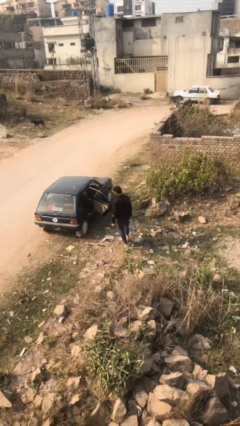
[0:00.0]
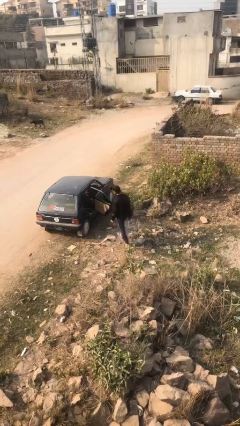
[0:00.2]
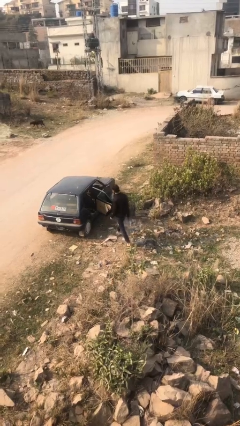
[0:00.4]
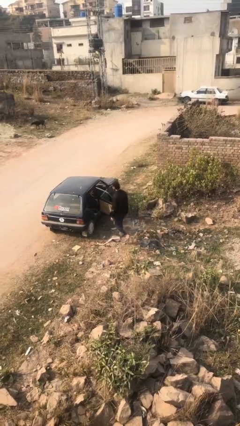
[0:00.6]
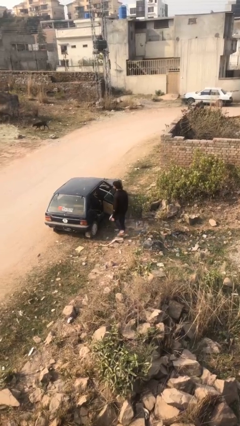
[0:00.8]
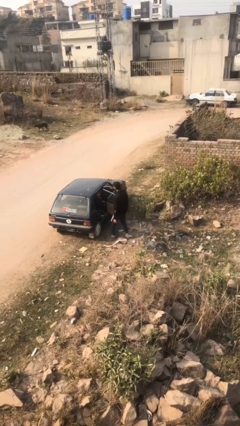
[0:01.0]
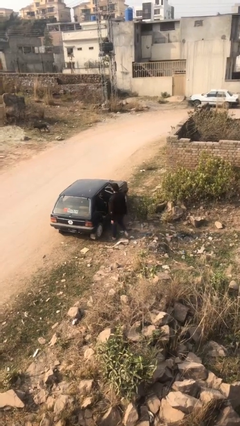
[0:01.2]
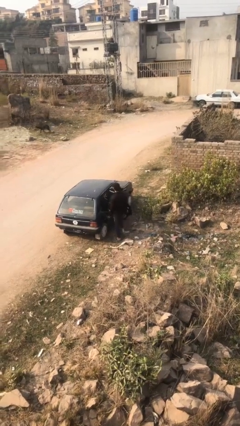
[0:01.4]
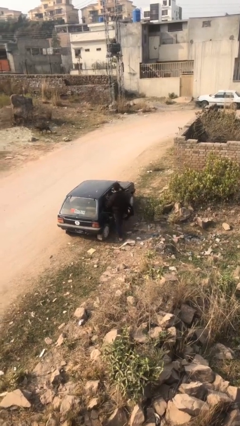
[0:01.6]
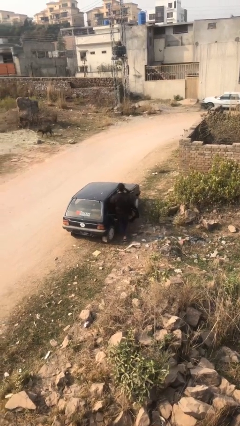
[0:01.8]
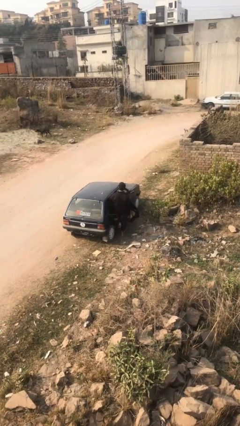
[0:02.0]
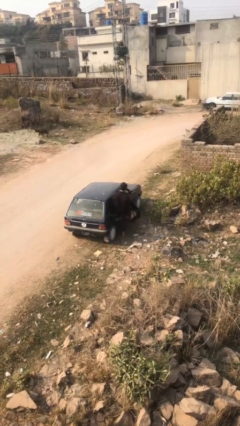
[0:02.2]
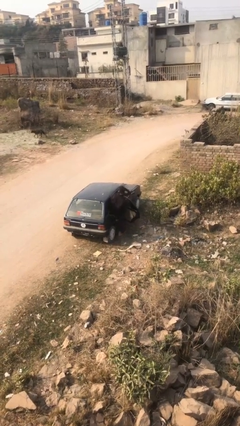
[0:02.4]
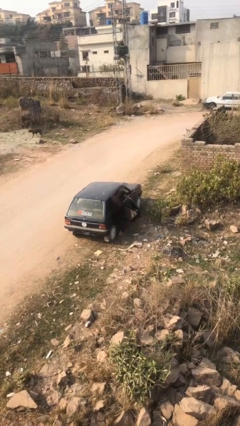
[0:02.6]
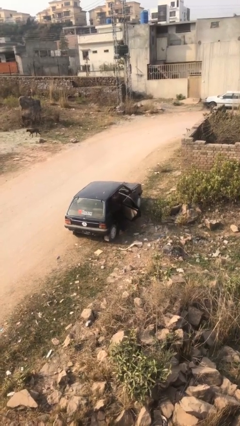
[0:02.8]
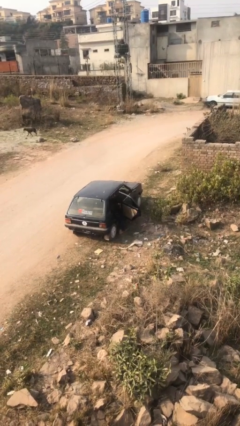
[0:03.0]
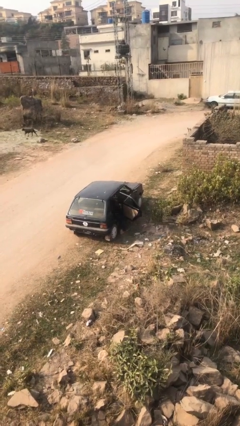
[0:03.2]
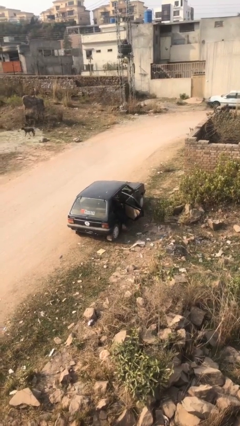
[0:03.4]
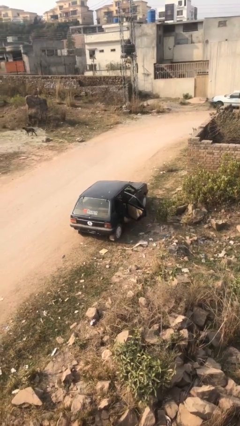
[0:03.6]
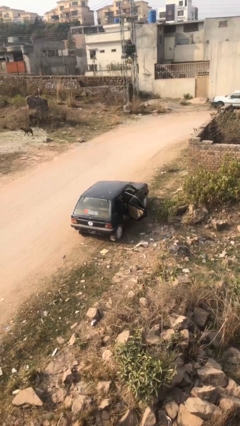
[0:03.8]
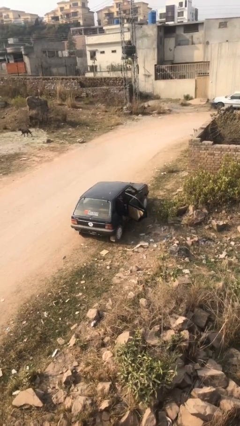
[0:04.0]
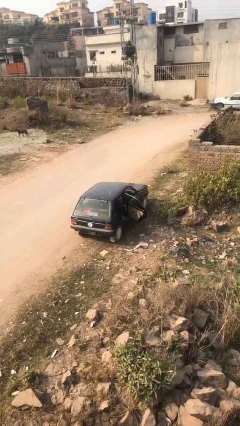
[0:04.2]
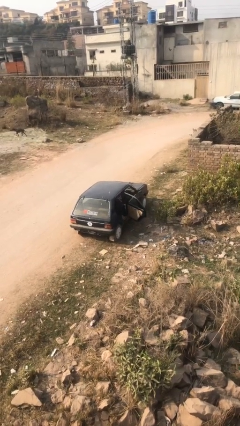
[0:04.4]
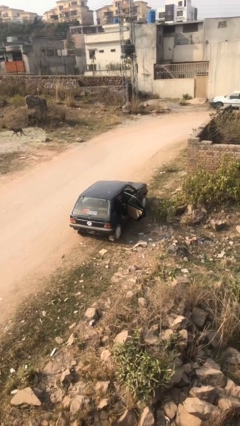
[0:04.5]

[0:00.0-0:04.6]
person enters car

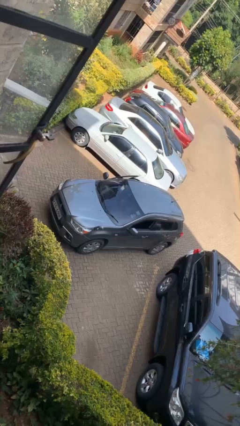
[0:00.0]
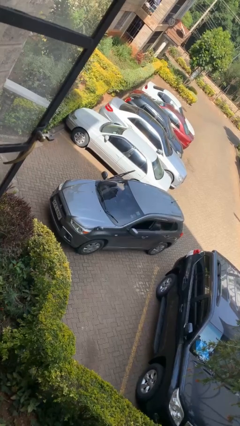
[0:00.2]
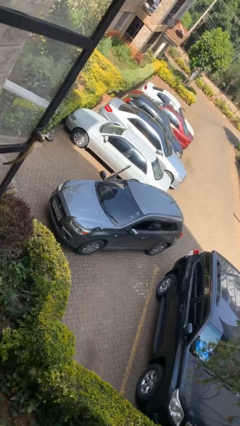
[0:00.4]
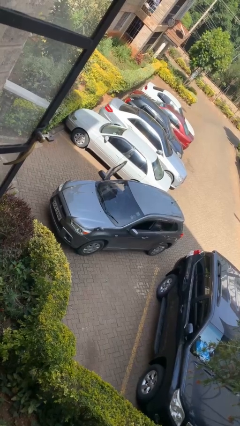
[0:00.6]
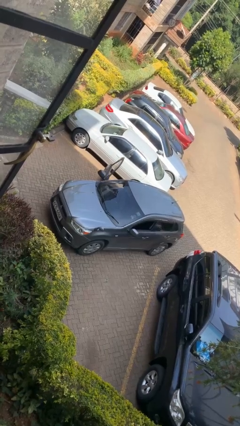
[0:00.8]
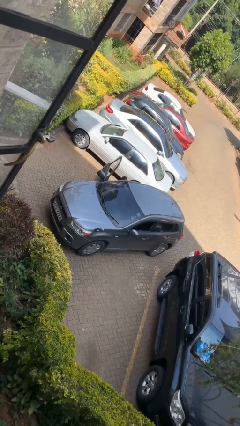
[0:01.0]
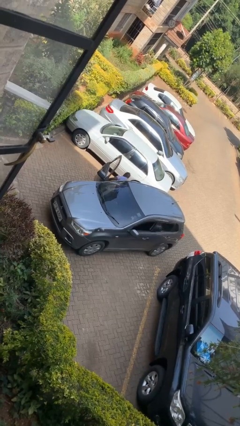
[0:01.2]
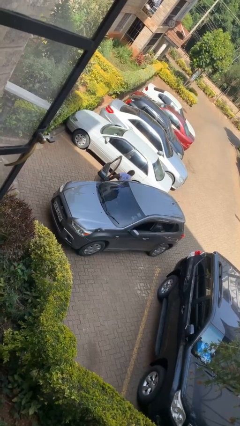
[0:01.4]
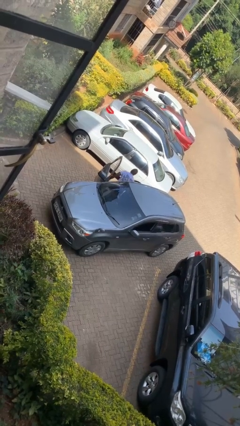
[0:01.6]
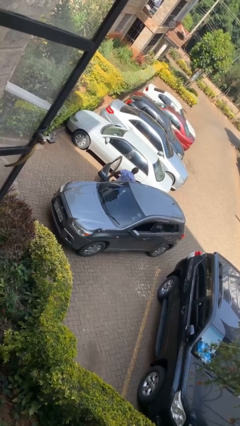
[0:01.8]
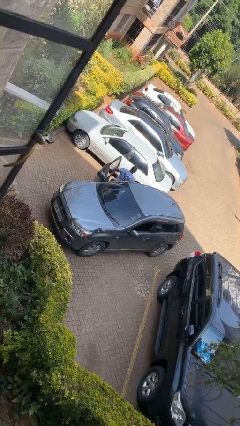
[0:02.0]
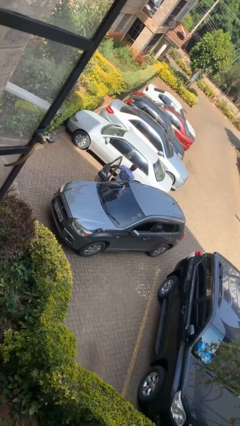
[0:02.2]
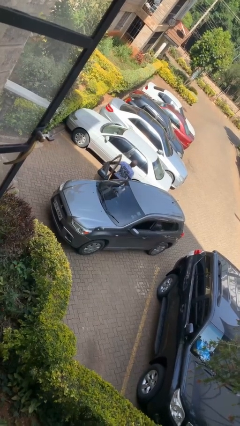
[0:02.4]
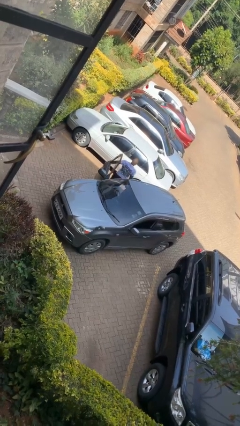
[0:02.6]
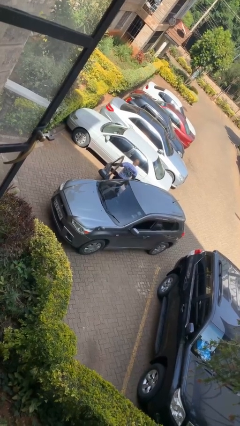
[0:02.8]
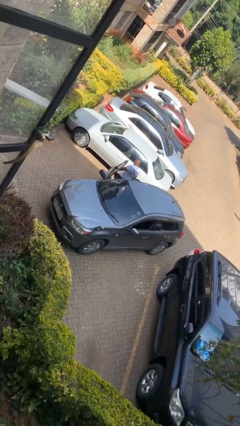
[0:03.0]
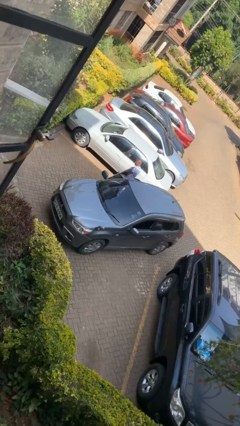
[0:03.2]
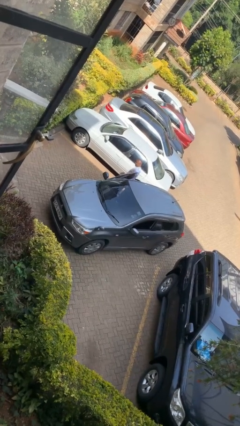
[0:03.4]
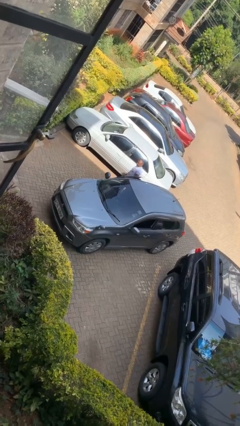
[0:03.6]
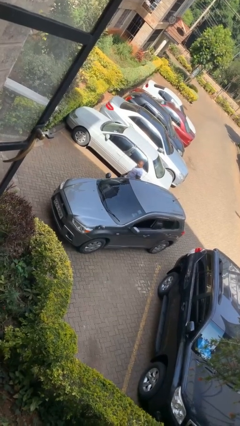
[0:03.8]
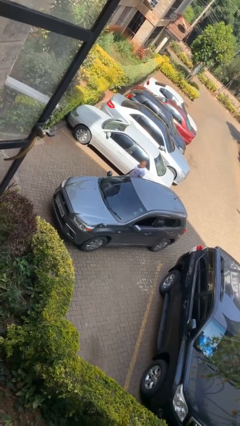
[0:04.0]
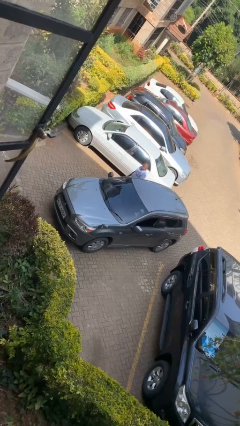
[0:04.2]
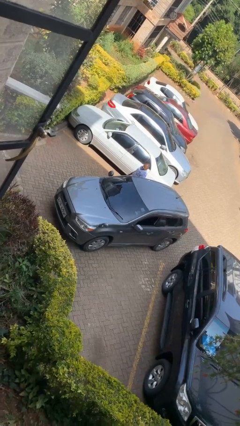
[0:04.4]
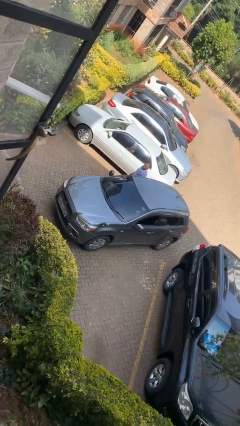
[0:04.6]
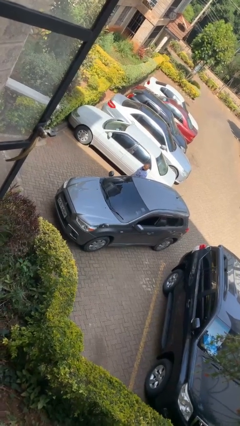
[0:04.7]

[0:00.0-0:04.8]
car drops off person

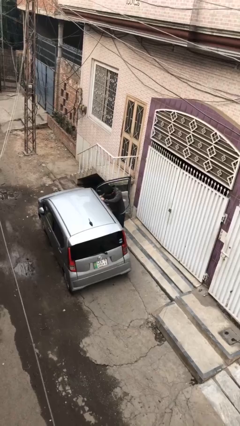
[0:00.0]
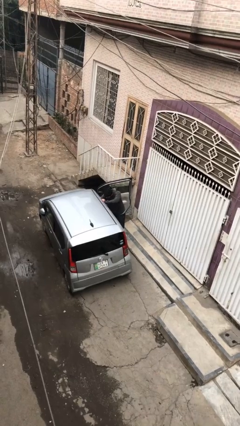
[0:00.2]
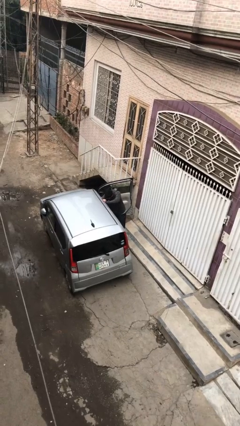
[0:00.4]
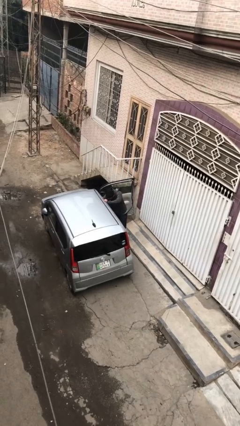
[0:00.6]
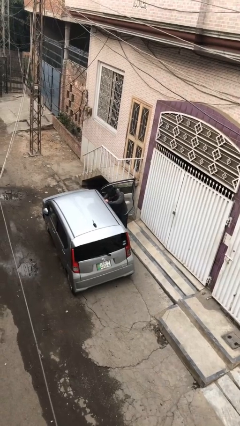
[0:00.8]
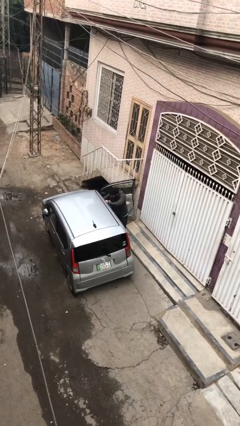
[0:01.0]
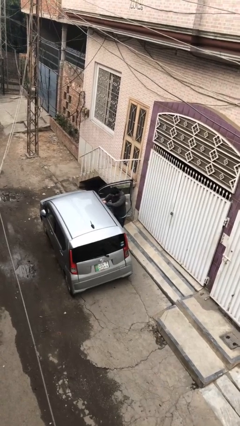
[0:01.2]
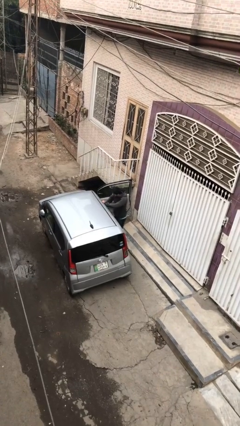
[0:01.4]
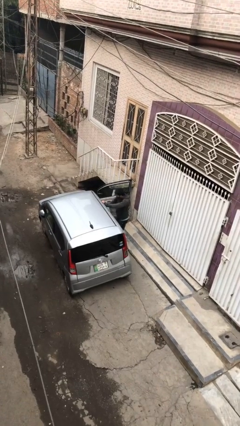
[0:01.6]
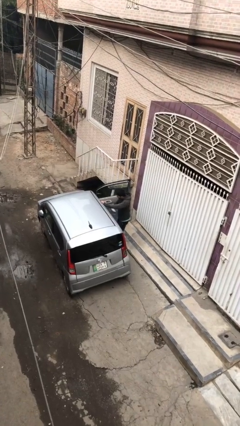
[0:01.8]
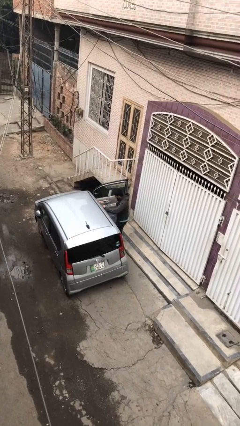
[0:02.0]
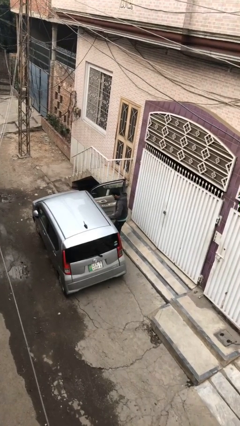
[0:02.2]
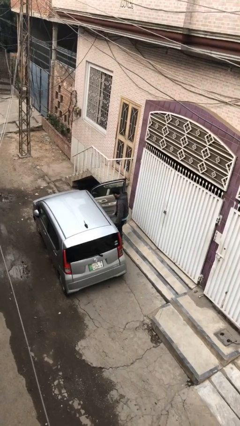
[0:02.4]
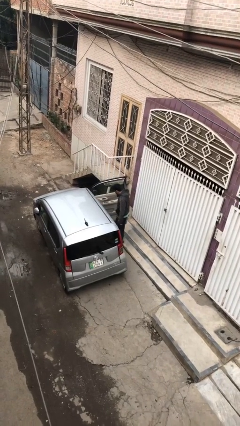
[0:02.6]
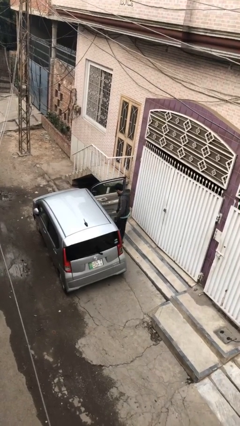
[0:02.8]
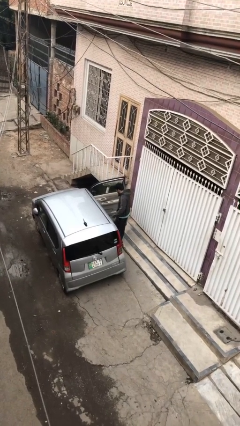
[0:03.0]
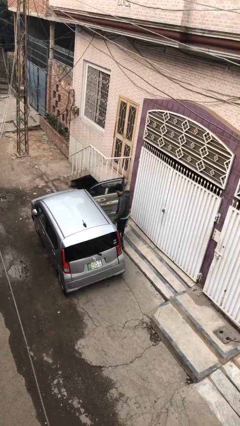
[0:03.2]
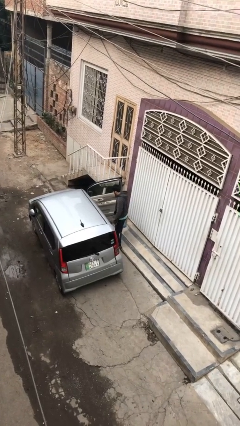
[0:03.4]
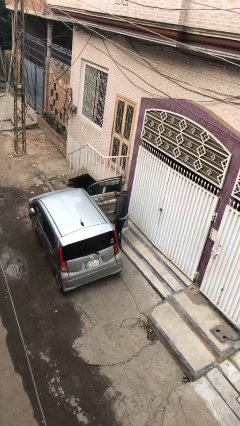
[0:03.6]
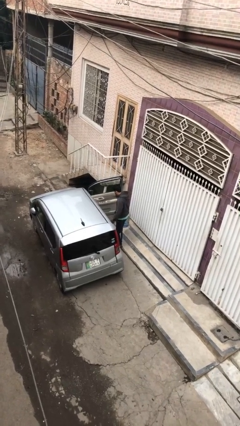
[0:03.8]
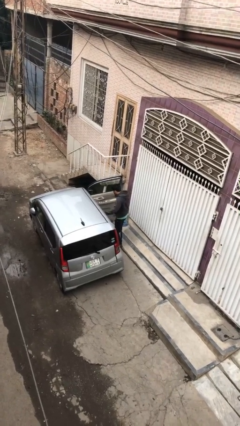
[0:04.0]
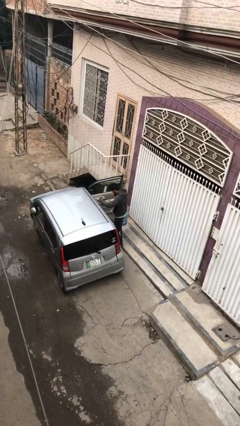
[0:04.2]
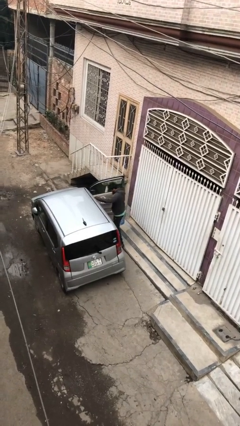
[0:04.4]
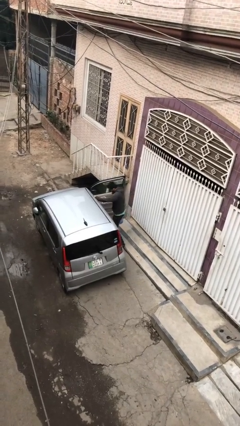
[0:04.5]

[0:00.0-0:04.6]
person unloads car

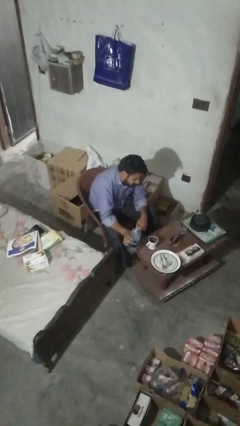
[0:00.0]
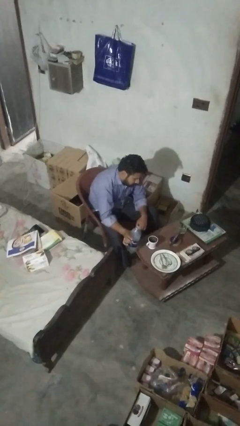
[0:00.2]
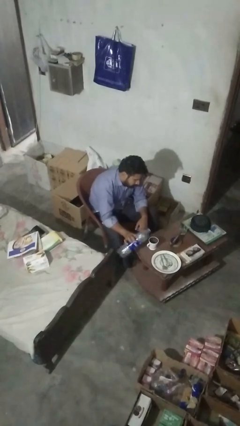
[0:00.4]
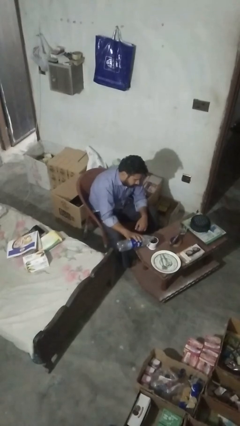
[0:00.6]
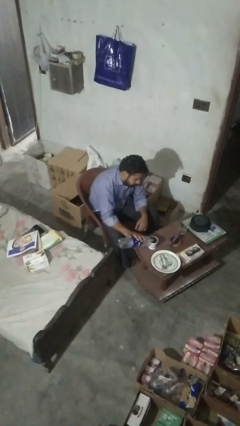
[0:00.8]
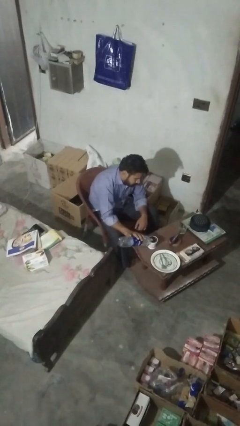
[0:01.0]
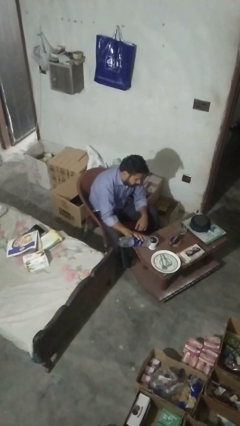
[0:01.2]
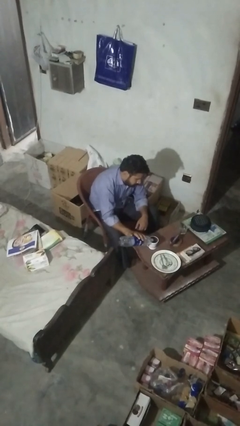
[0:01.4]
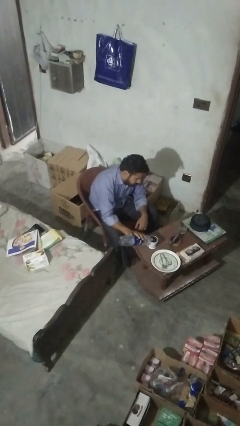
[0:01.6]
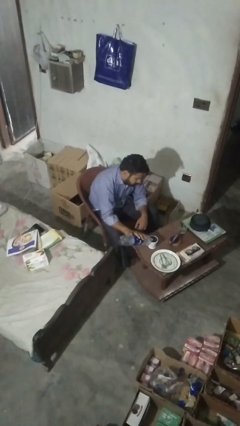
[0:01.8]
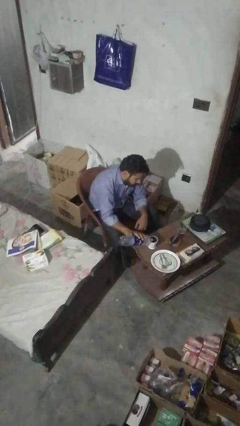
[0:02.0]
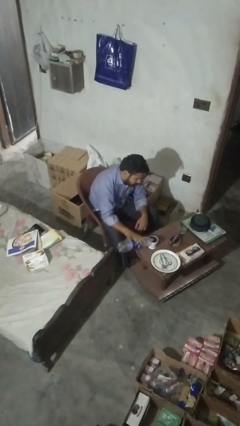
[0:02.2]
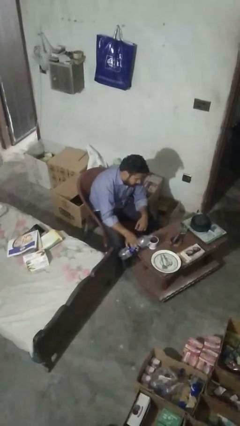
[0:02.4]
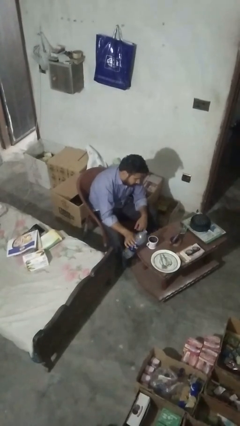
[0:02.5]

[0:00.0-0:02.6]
person pours liquid into cup

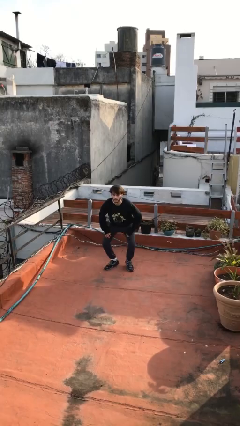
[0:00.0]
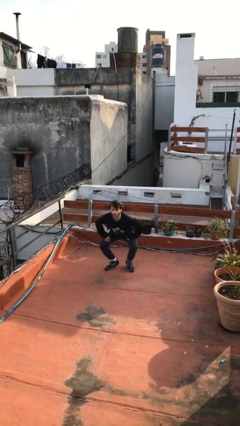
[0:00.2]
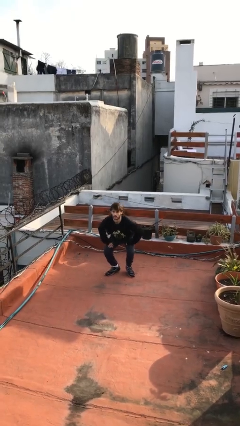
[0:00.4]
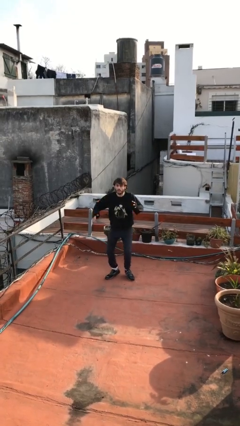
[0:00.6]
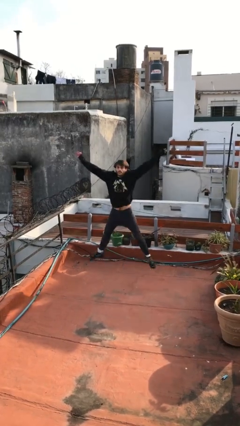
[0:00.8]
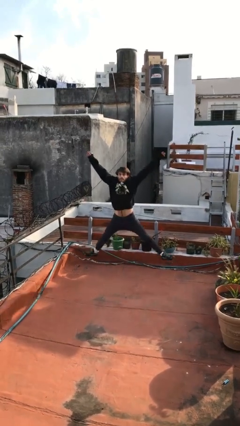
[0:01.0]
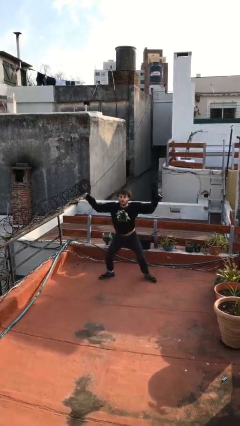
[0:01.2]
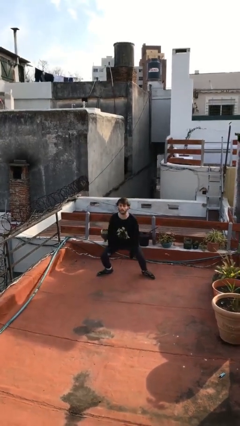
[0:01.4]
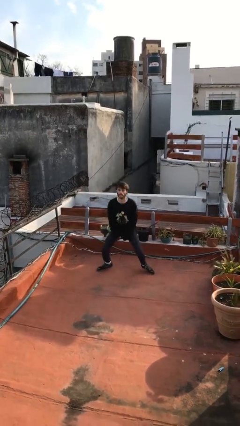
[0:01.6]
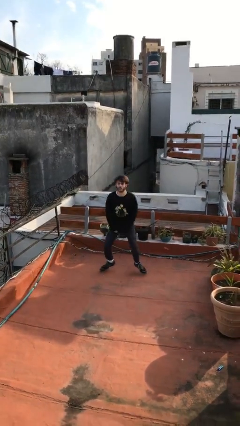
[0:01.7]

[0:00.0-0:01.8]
person exercises with jumping jacks
